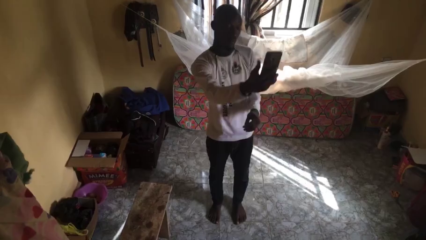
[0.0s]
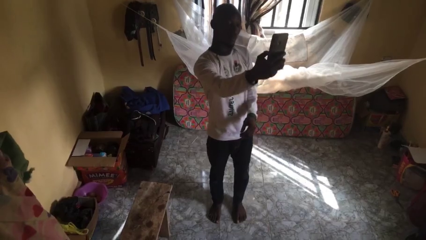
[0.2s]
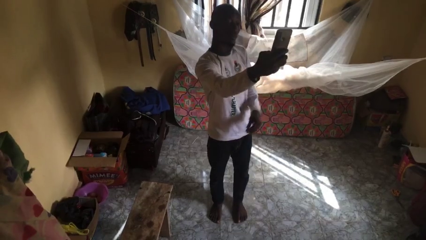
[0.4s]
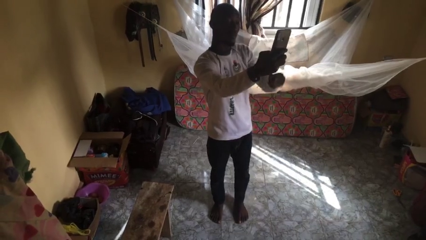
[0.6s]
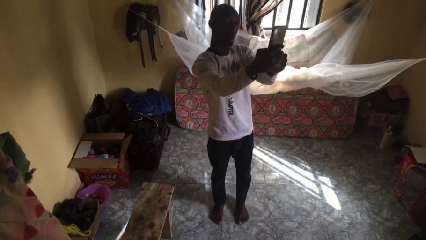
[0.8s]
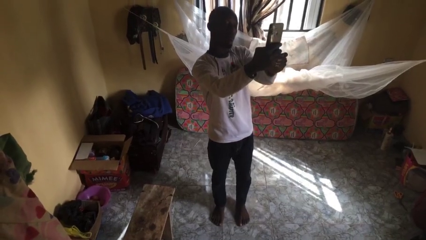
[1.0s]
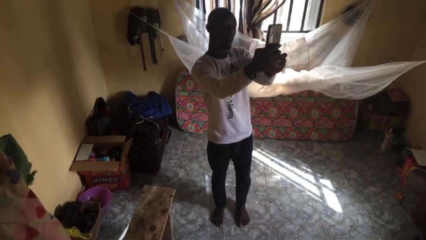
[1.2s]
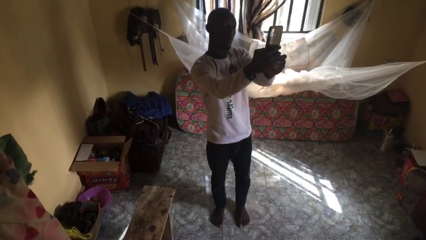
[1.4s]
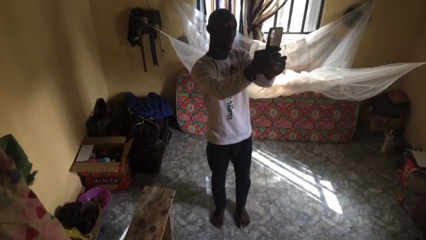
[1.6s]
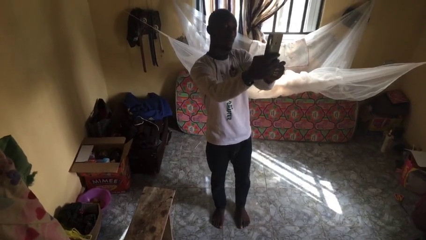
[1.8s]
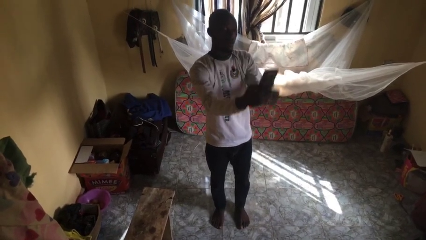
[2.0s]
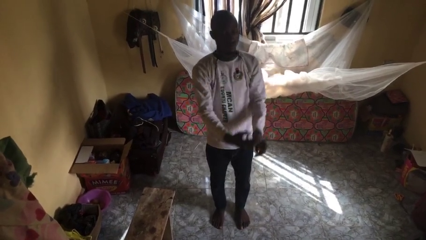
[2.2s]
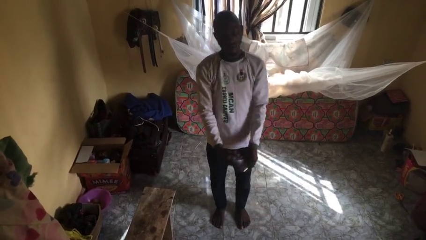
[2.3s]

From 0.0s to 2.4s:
person takes selfie

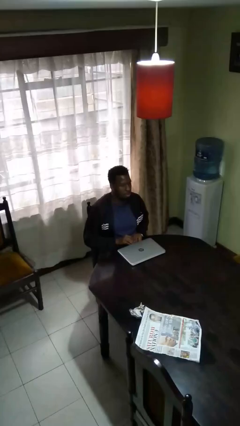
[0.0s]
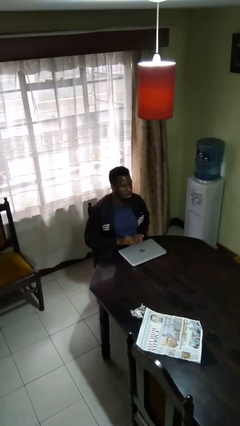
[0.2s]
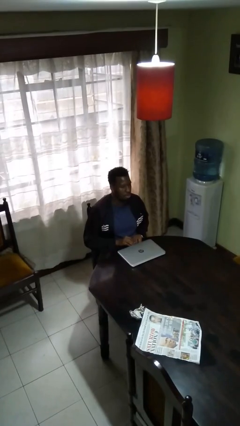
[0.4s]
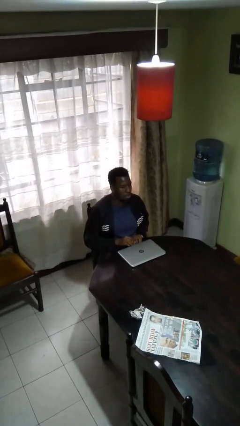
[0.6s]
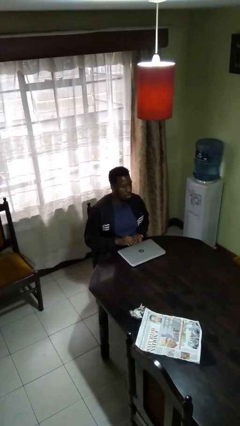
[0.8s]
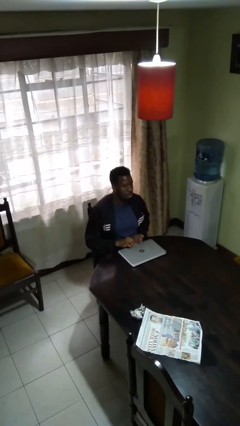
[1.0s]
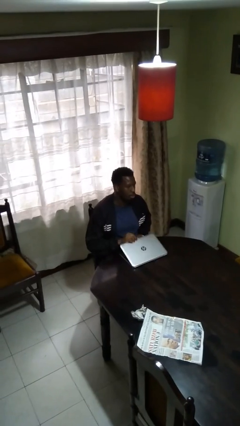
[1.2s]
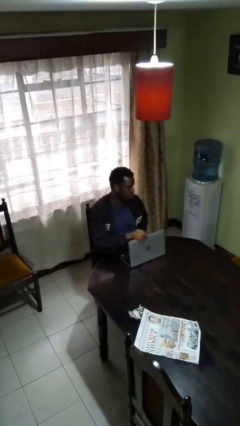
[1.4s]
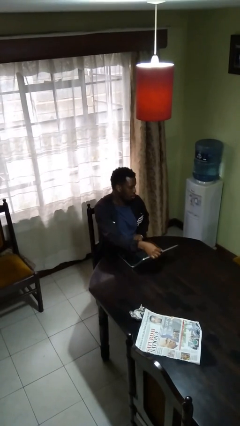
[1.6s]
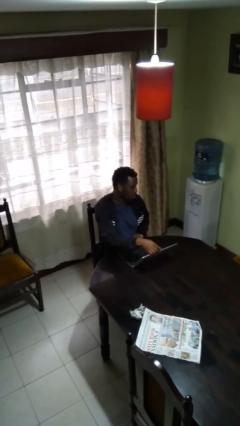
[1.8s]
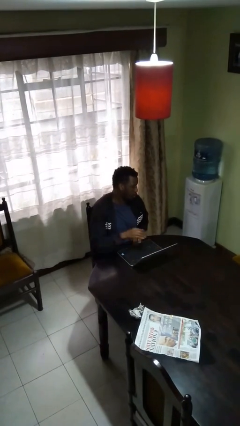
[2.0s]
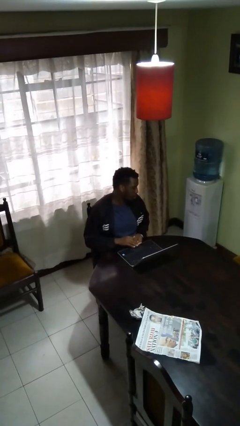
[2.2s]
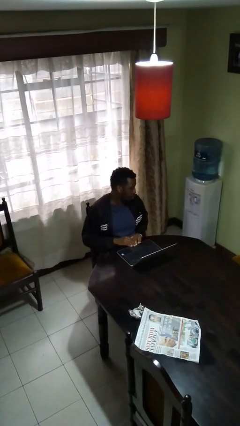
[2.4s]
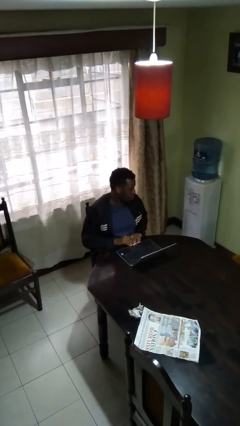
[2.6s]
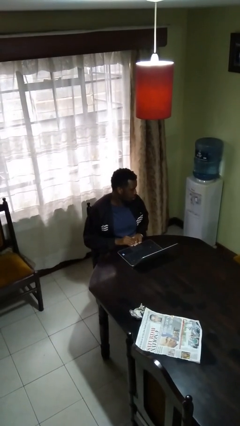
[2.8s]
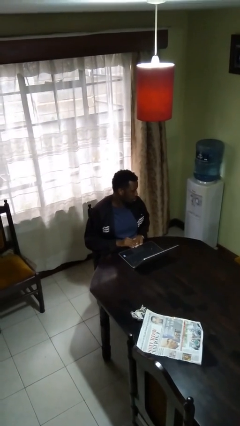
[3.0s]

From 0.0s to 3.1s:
person opens laptop

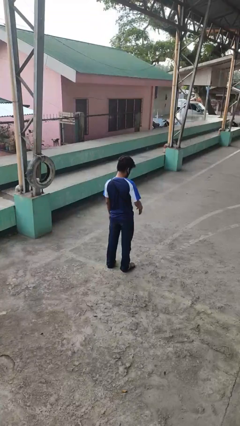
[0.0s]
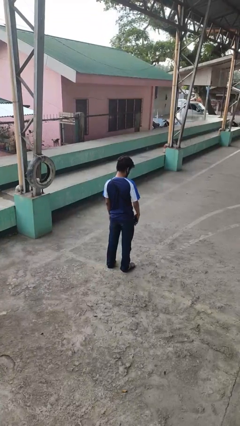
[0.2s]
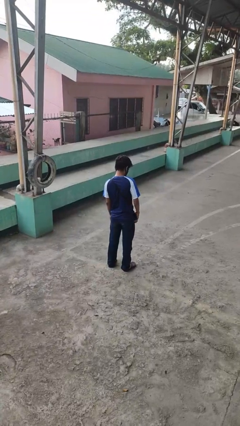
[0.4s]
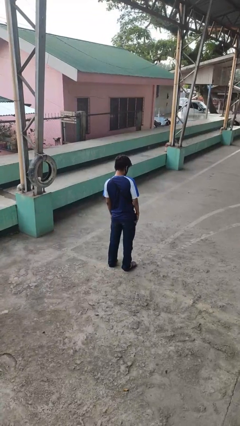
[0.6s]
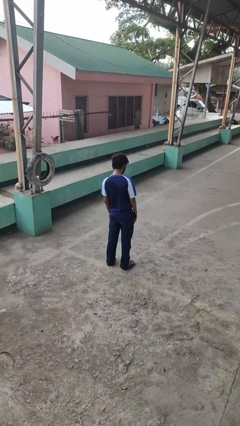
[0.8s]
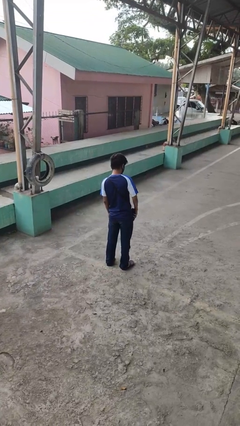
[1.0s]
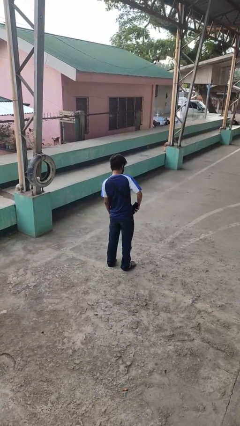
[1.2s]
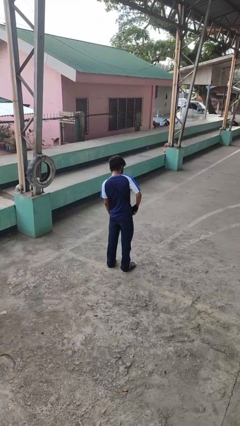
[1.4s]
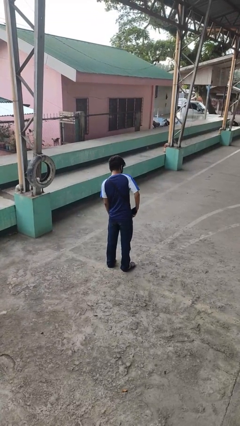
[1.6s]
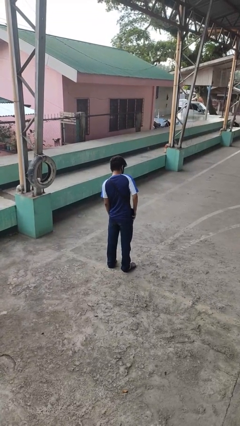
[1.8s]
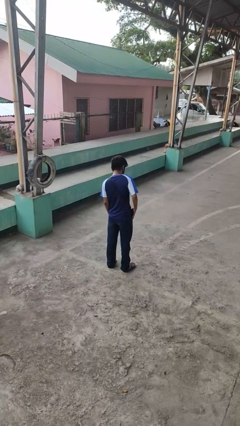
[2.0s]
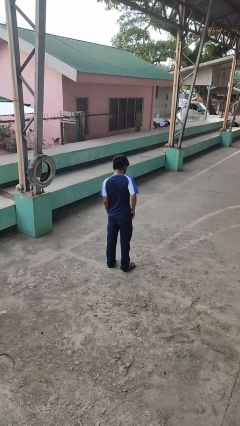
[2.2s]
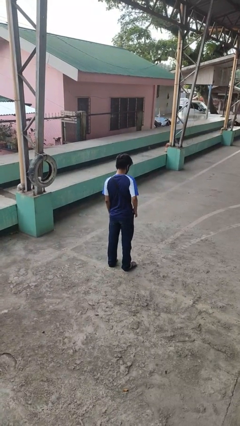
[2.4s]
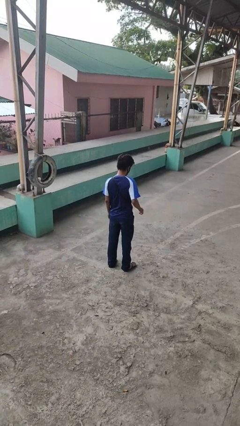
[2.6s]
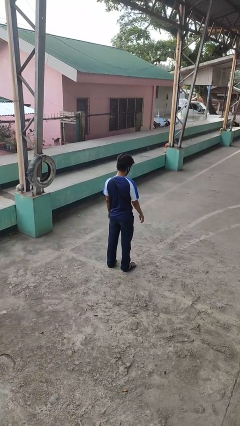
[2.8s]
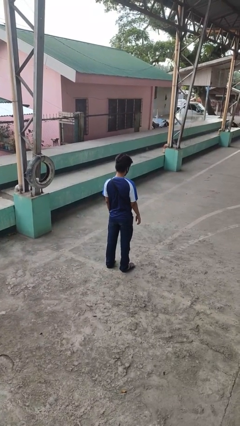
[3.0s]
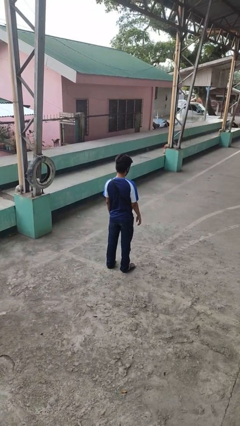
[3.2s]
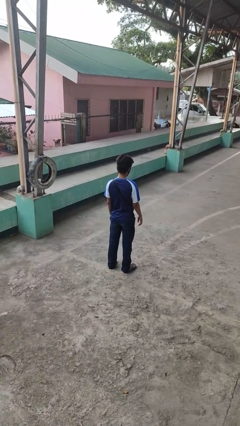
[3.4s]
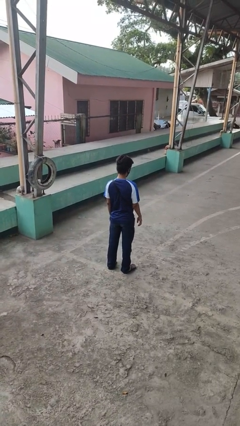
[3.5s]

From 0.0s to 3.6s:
person puts phone into pocket

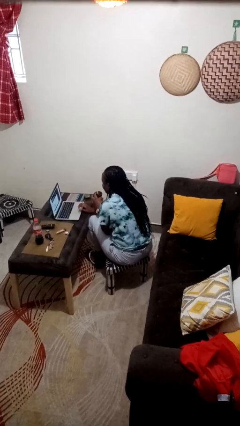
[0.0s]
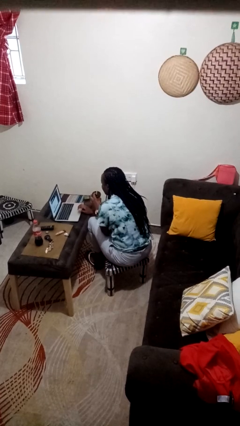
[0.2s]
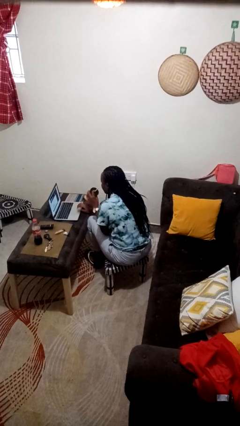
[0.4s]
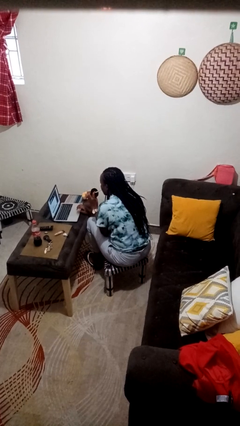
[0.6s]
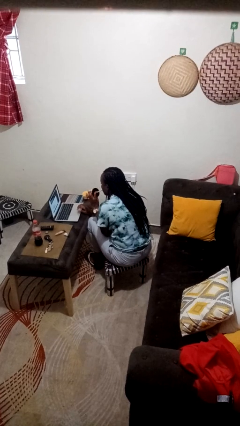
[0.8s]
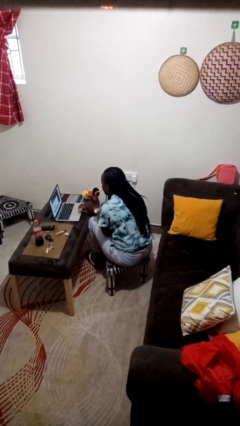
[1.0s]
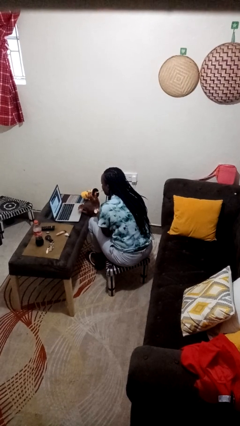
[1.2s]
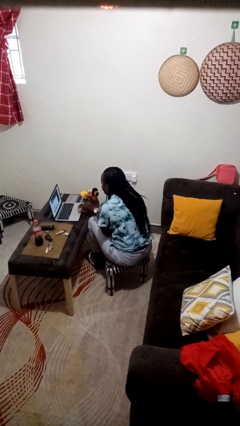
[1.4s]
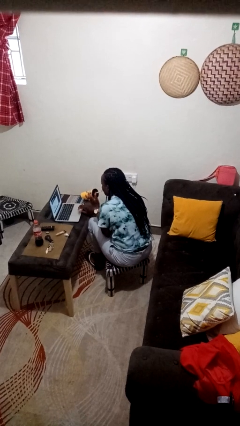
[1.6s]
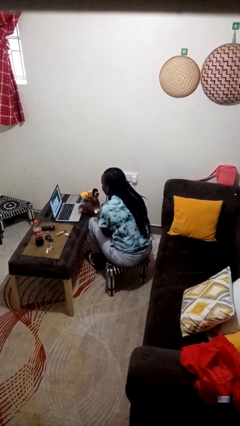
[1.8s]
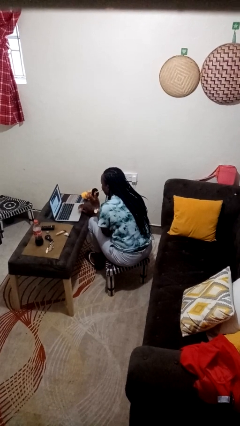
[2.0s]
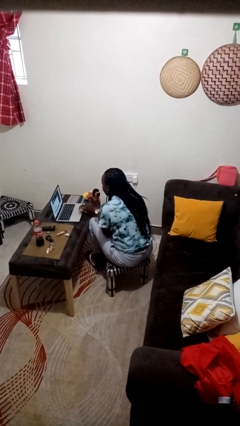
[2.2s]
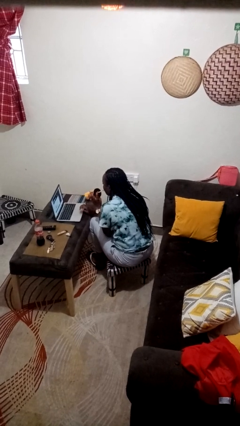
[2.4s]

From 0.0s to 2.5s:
person drinks from straw

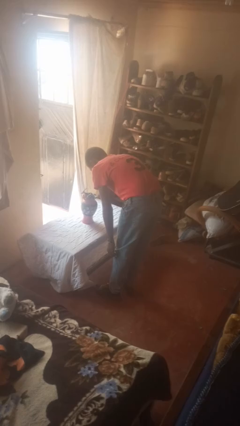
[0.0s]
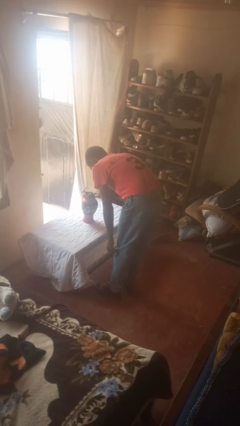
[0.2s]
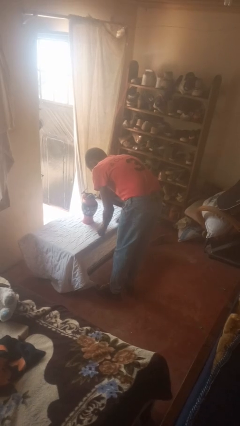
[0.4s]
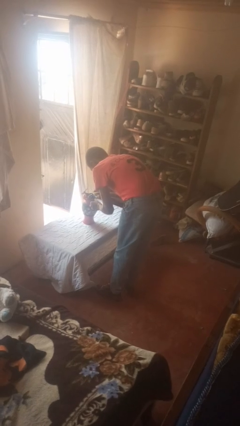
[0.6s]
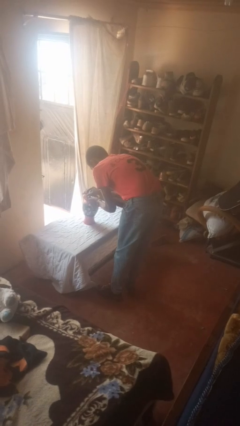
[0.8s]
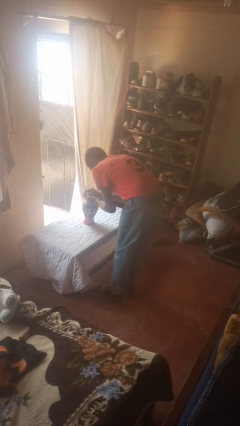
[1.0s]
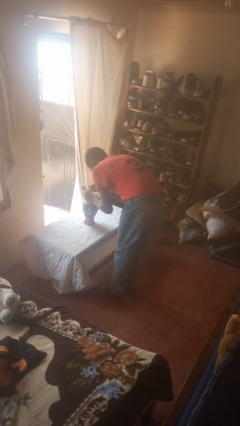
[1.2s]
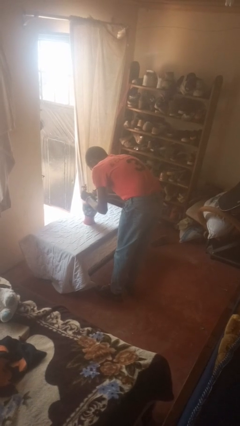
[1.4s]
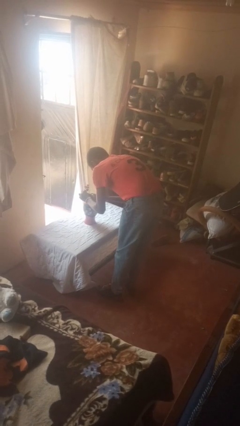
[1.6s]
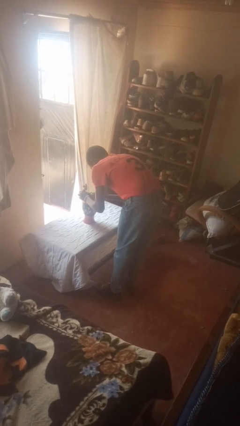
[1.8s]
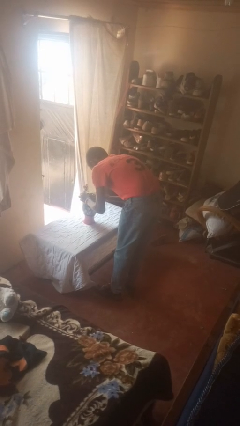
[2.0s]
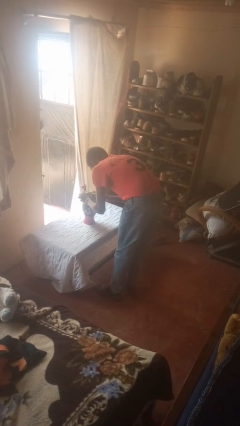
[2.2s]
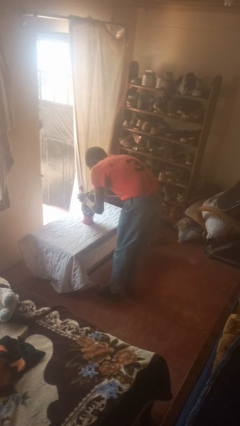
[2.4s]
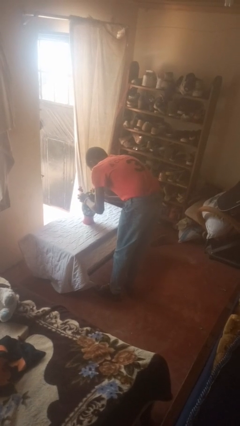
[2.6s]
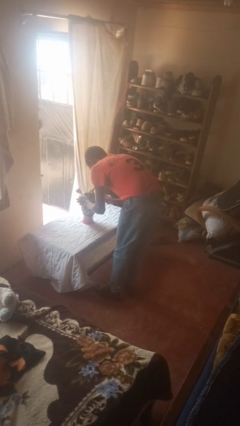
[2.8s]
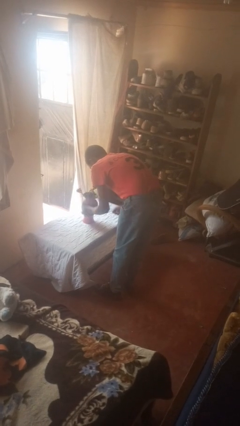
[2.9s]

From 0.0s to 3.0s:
person arranges flowers in vase

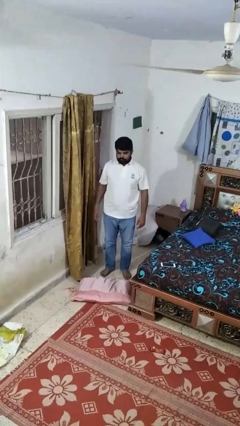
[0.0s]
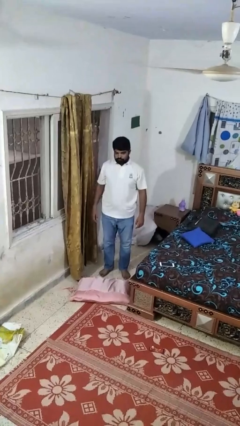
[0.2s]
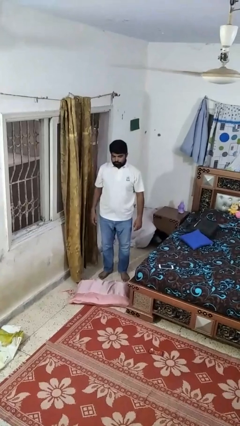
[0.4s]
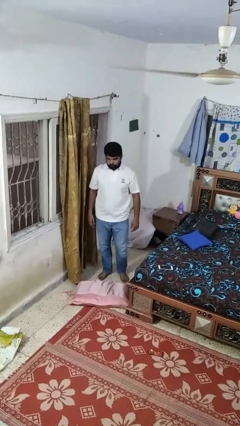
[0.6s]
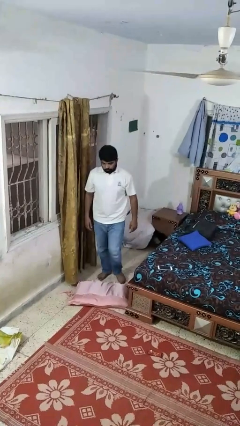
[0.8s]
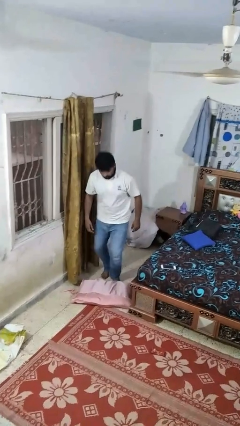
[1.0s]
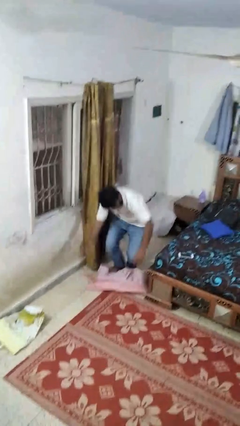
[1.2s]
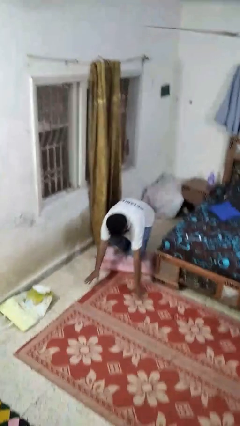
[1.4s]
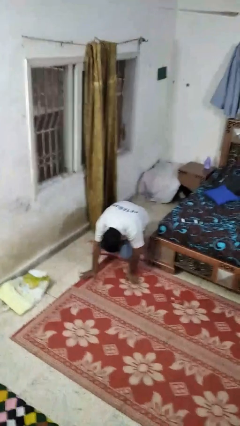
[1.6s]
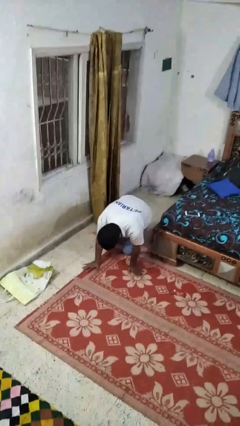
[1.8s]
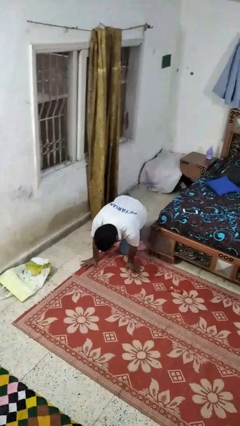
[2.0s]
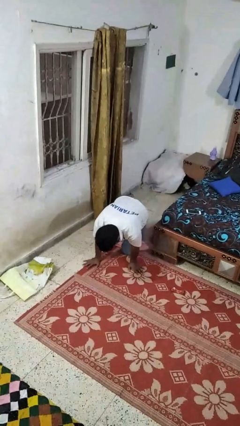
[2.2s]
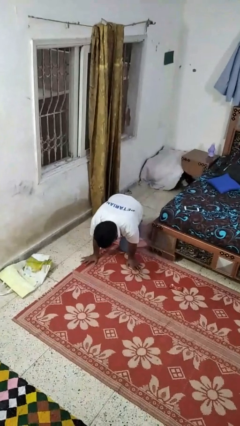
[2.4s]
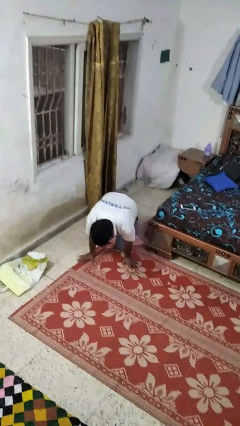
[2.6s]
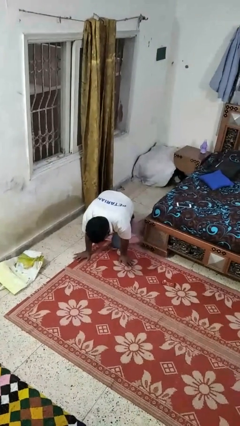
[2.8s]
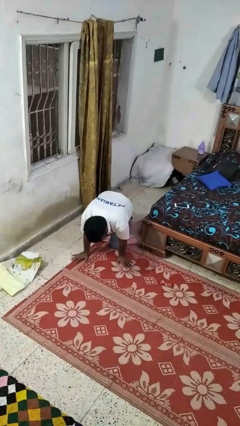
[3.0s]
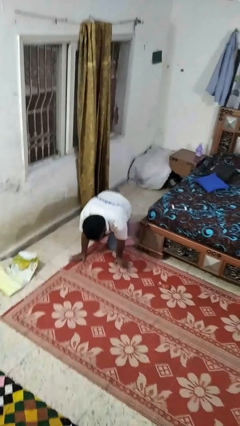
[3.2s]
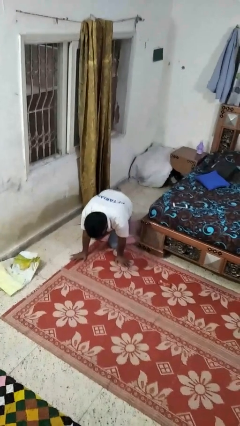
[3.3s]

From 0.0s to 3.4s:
person trips on object on floor
